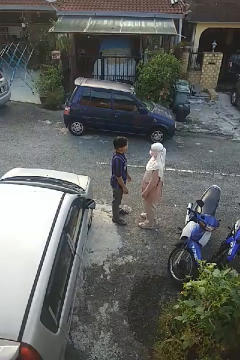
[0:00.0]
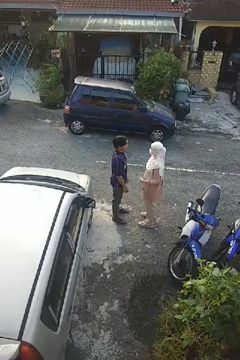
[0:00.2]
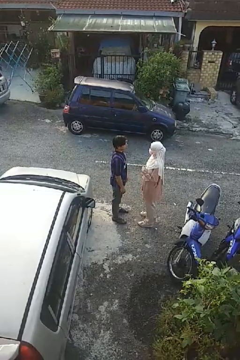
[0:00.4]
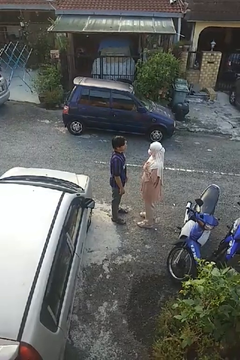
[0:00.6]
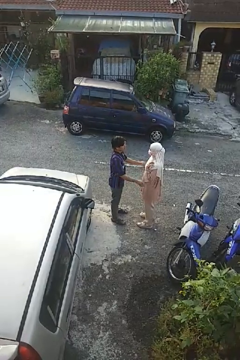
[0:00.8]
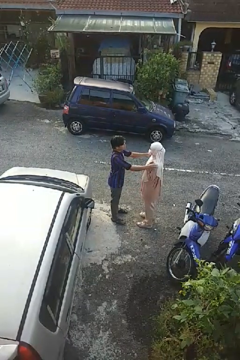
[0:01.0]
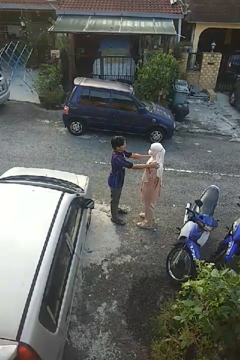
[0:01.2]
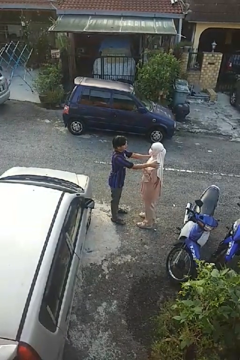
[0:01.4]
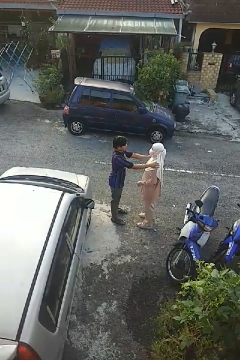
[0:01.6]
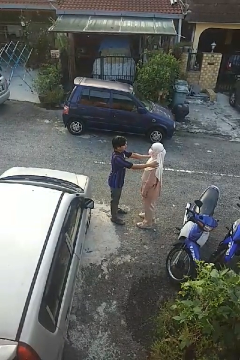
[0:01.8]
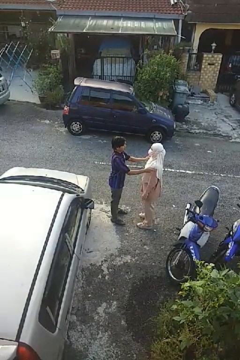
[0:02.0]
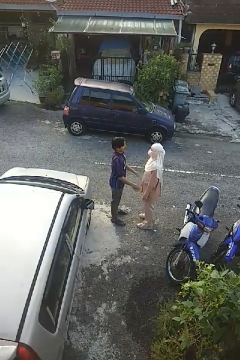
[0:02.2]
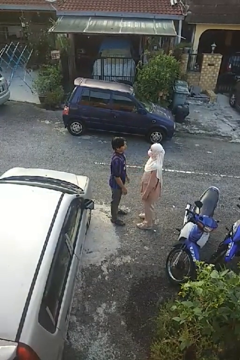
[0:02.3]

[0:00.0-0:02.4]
person pounds shoulders of person

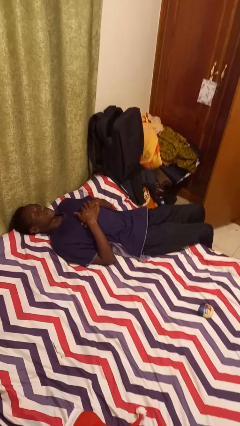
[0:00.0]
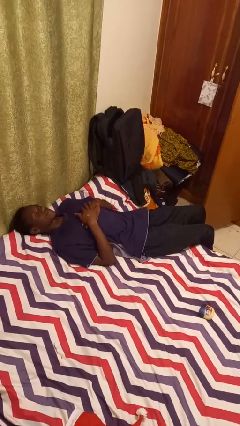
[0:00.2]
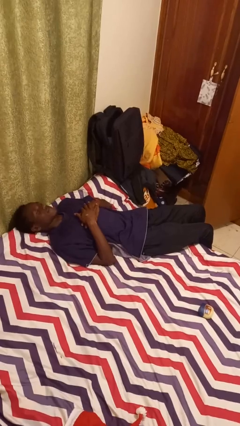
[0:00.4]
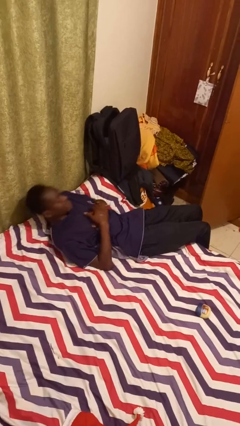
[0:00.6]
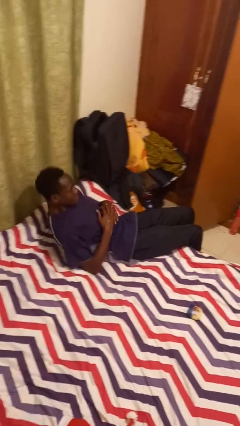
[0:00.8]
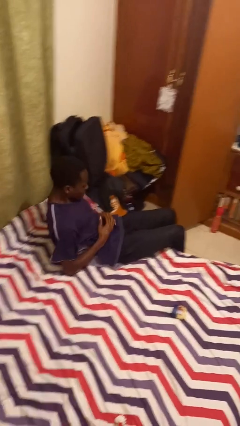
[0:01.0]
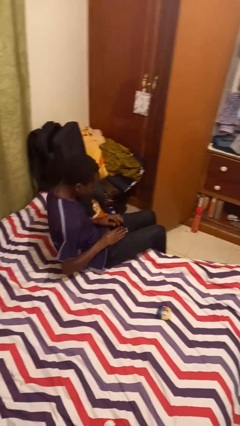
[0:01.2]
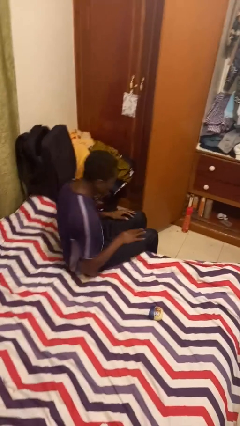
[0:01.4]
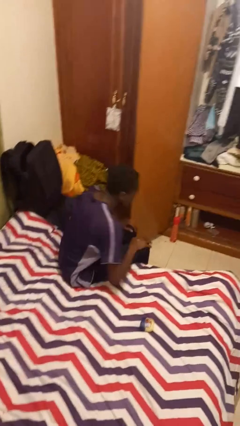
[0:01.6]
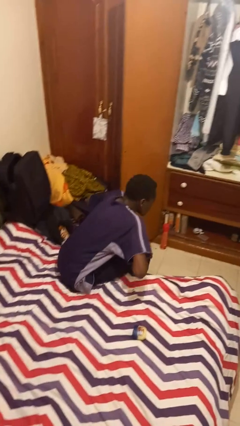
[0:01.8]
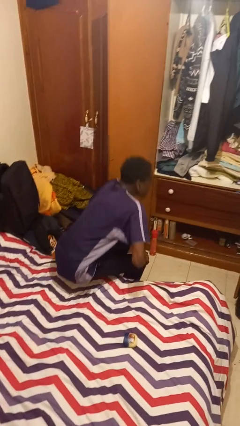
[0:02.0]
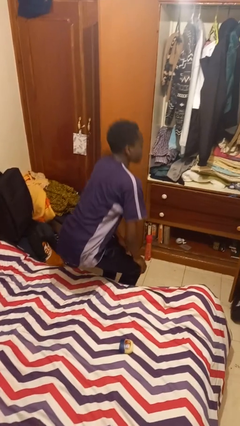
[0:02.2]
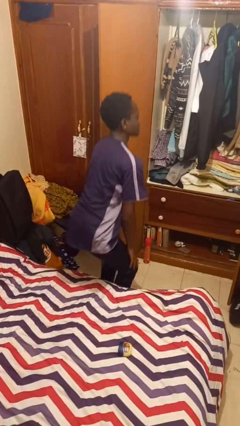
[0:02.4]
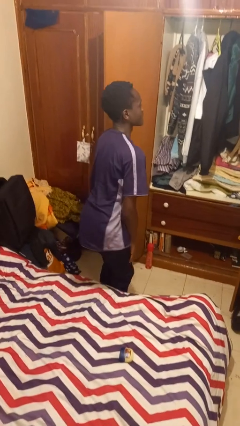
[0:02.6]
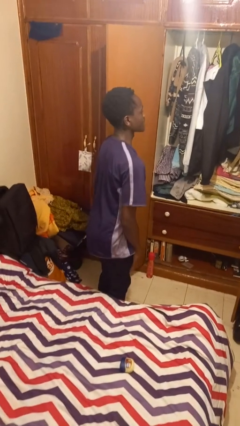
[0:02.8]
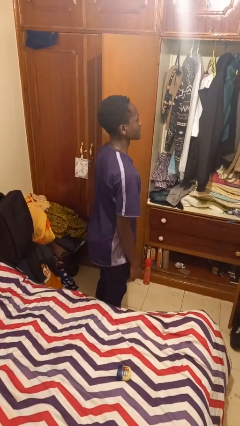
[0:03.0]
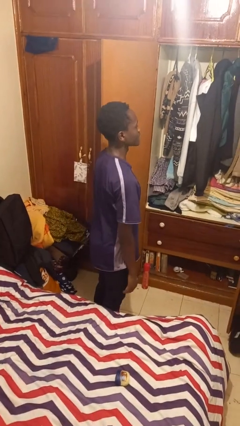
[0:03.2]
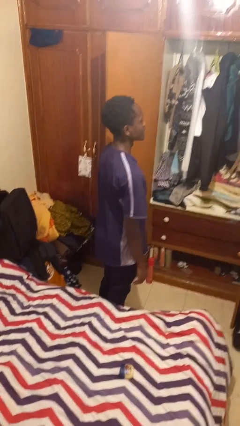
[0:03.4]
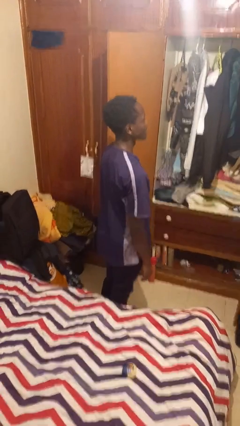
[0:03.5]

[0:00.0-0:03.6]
person stands up

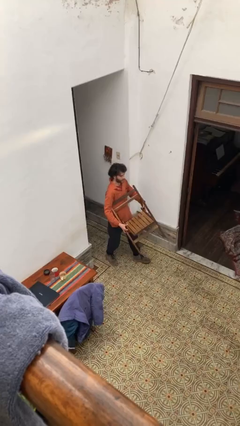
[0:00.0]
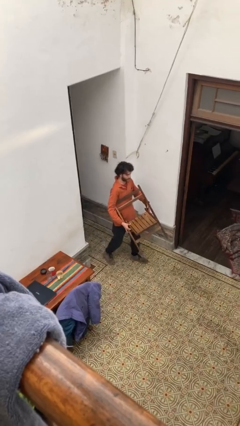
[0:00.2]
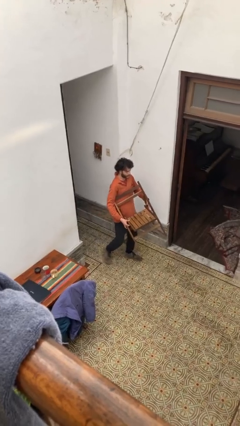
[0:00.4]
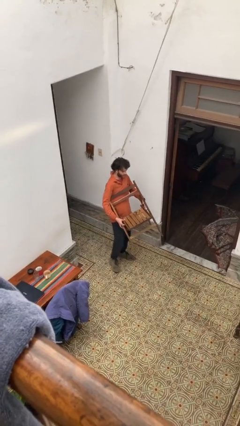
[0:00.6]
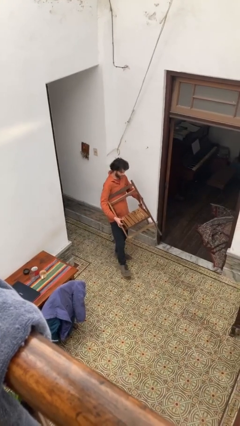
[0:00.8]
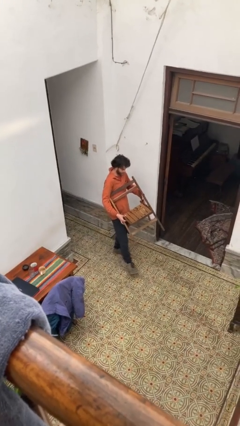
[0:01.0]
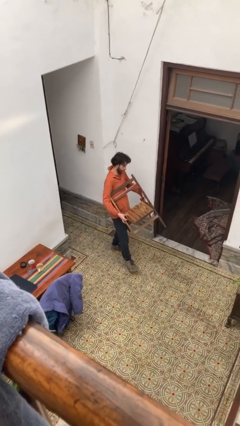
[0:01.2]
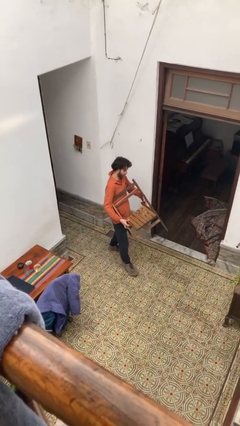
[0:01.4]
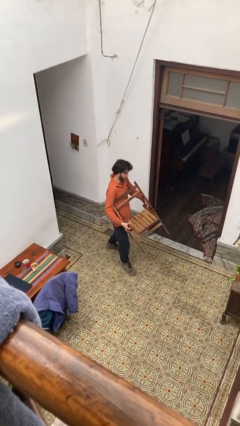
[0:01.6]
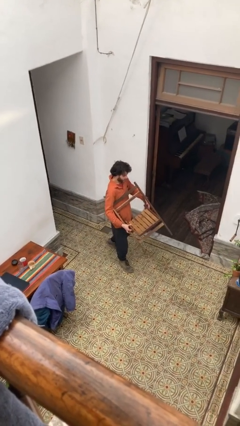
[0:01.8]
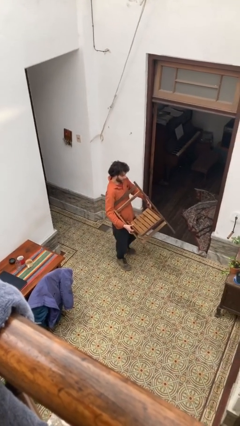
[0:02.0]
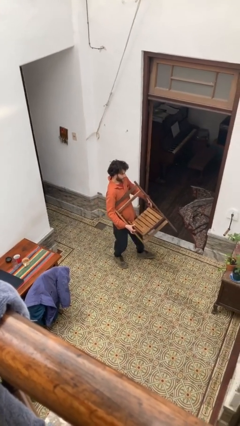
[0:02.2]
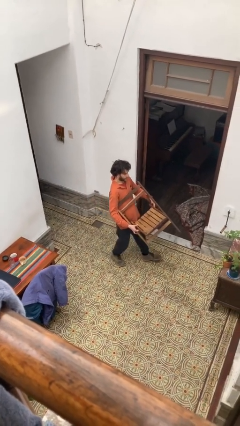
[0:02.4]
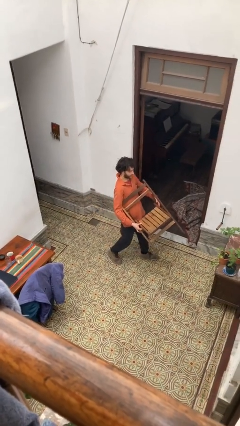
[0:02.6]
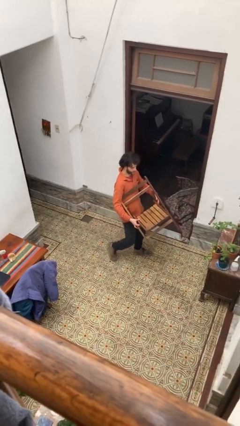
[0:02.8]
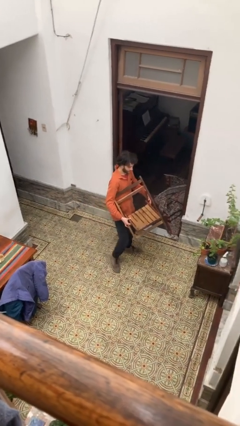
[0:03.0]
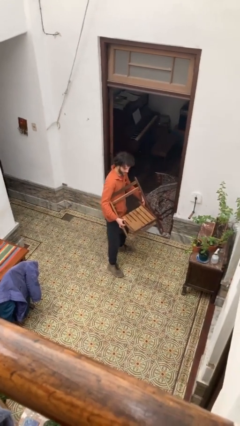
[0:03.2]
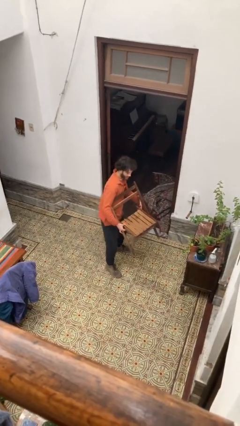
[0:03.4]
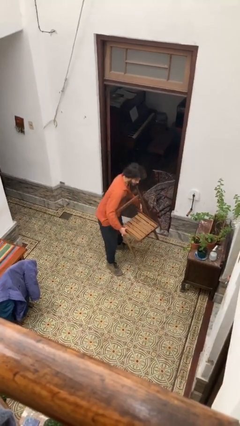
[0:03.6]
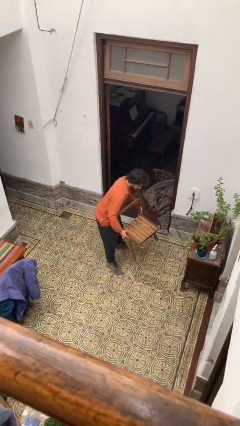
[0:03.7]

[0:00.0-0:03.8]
person carries heavy object

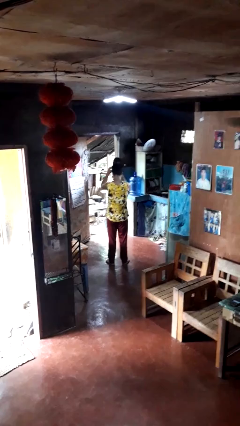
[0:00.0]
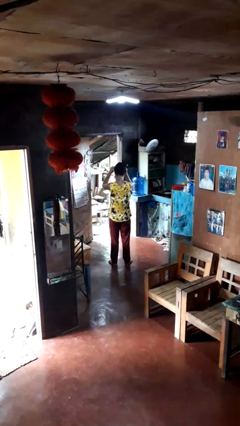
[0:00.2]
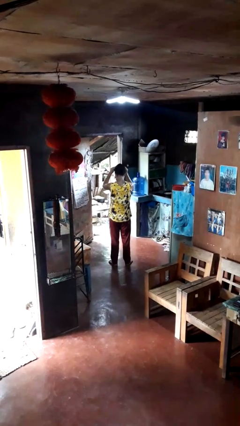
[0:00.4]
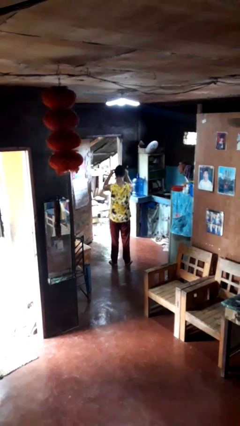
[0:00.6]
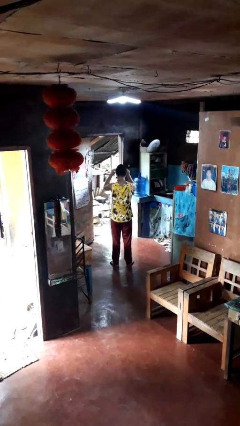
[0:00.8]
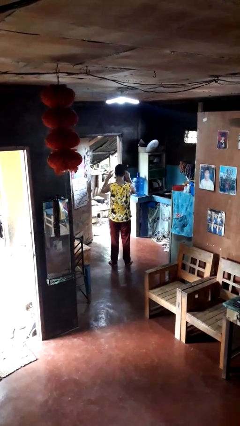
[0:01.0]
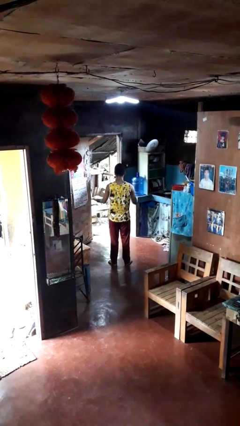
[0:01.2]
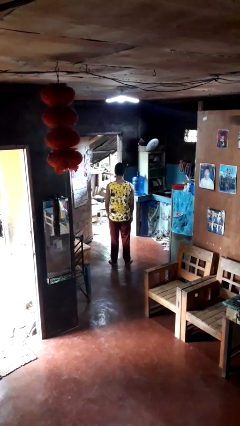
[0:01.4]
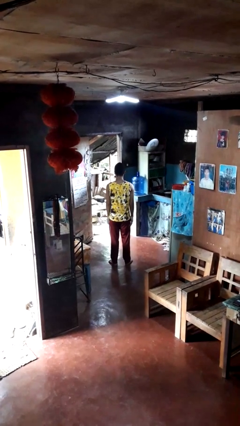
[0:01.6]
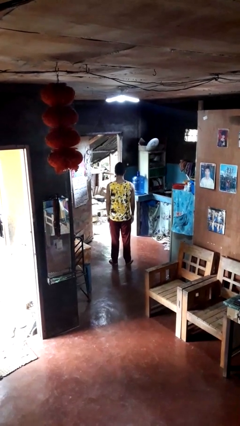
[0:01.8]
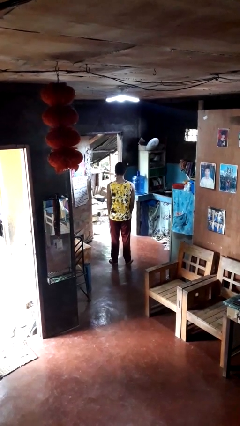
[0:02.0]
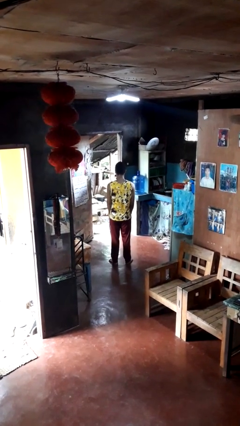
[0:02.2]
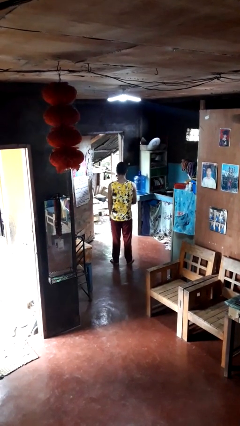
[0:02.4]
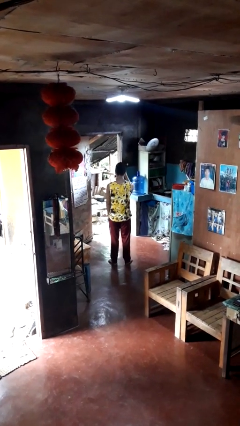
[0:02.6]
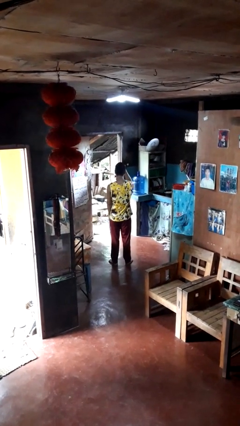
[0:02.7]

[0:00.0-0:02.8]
person puts on hat

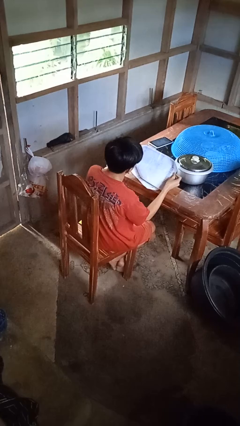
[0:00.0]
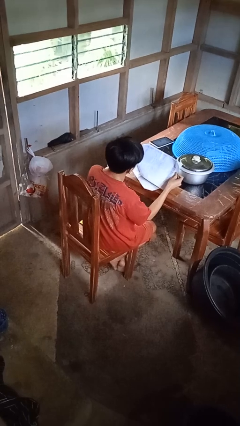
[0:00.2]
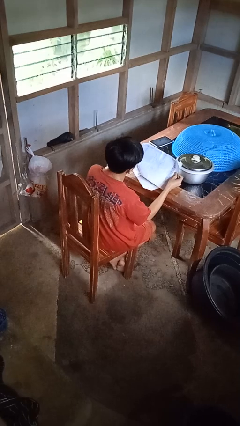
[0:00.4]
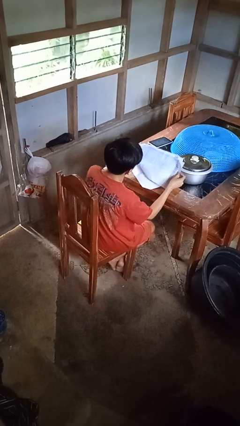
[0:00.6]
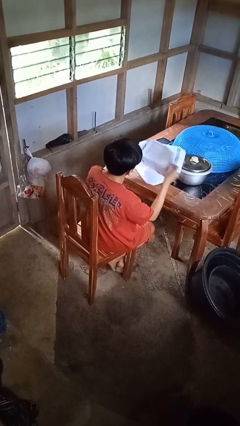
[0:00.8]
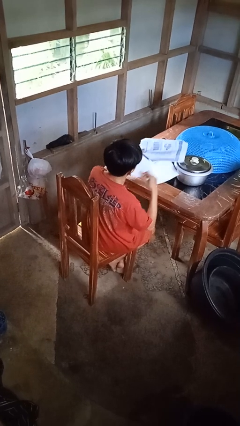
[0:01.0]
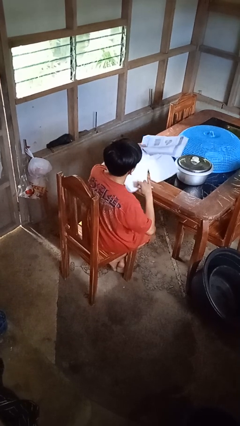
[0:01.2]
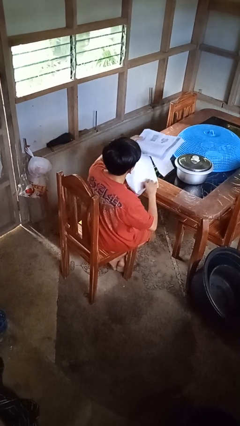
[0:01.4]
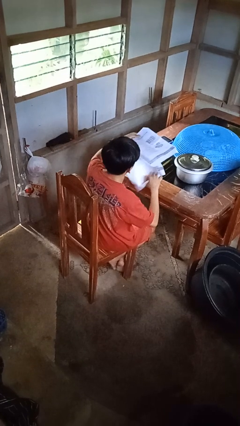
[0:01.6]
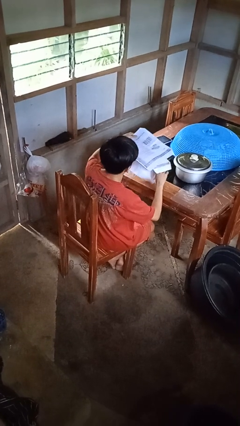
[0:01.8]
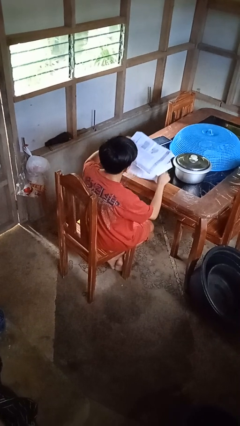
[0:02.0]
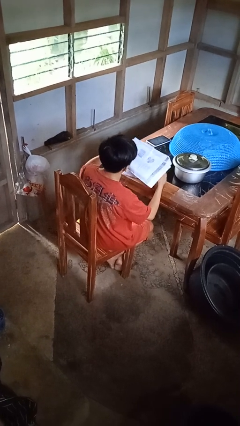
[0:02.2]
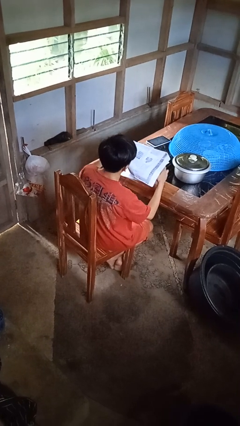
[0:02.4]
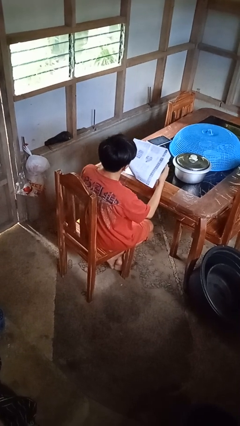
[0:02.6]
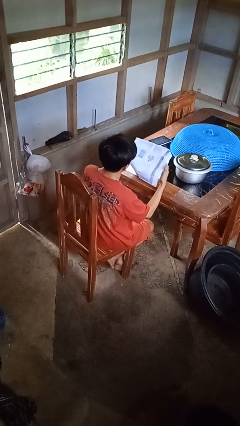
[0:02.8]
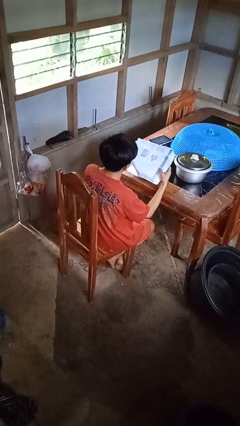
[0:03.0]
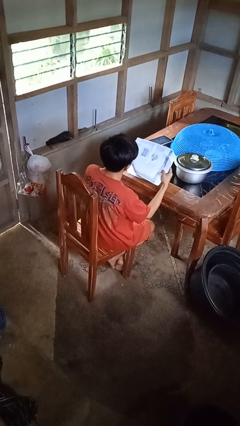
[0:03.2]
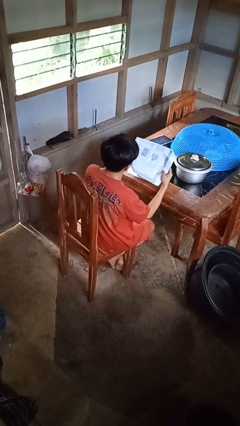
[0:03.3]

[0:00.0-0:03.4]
person reads newspaper

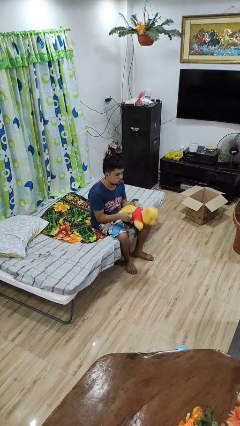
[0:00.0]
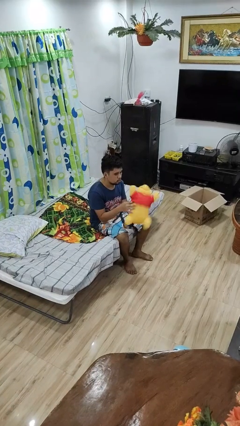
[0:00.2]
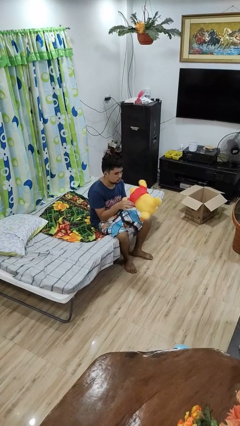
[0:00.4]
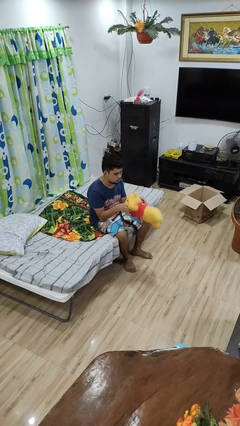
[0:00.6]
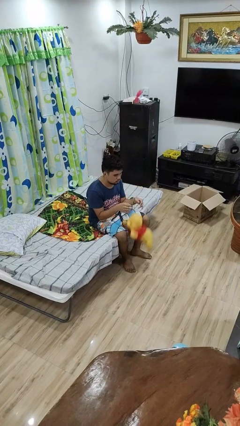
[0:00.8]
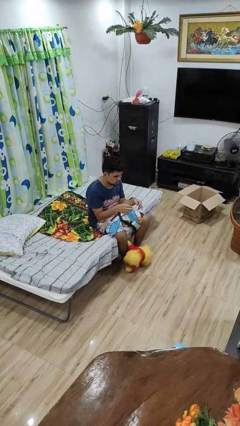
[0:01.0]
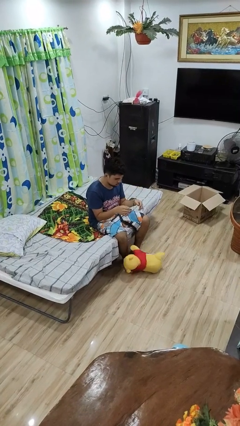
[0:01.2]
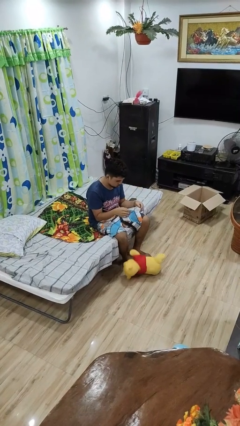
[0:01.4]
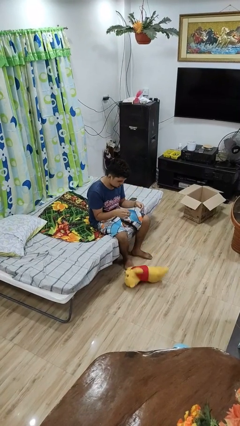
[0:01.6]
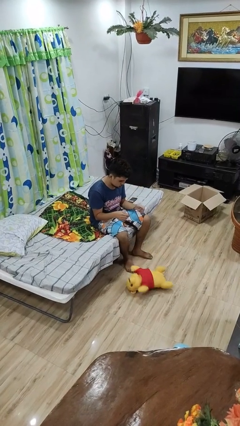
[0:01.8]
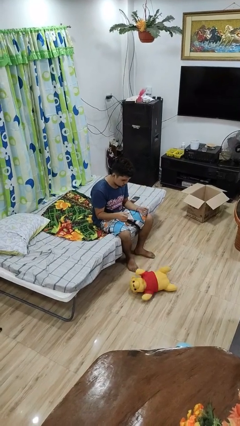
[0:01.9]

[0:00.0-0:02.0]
person drops object
